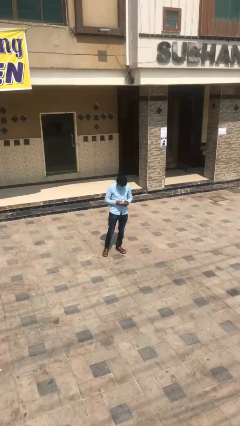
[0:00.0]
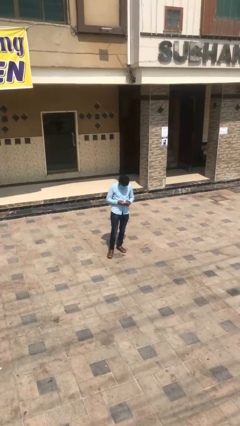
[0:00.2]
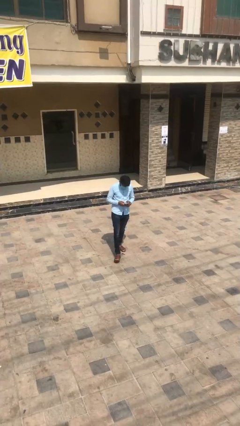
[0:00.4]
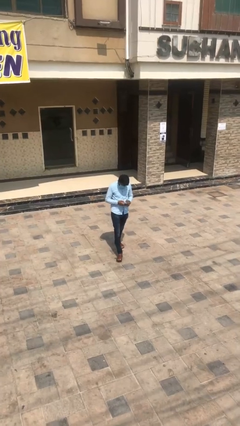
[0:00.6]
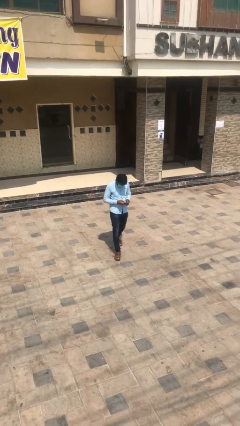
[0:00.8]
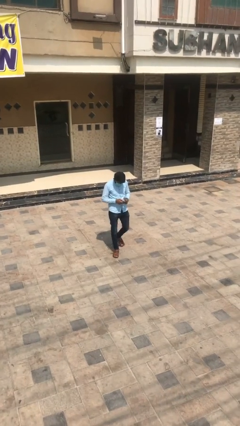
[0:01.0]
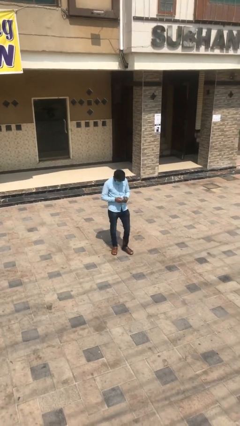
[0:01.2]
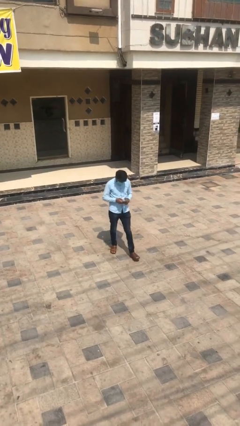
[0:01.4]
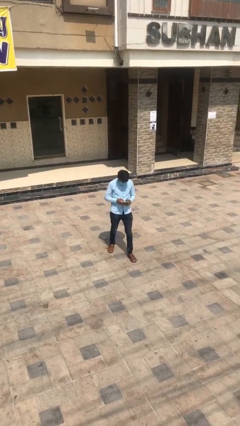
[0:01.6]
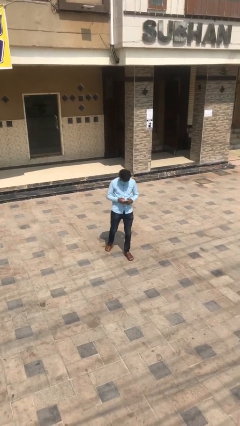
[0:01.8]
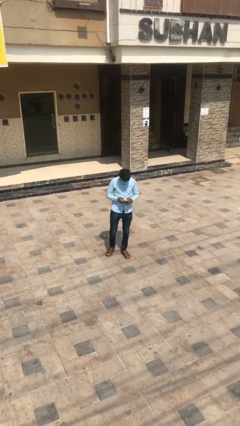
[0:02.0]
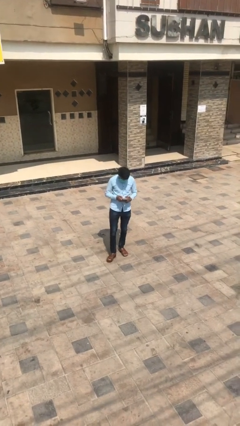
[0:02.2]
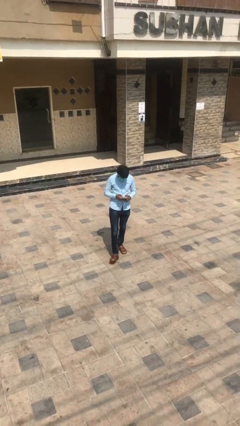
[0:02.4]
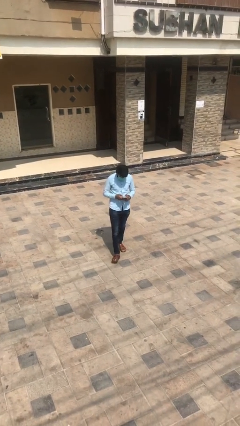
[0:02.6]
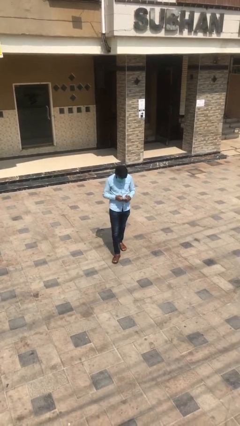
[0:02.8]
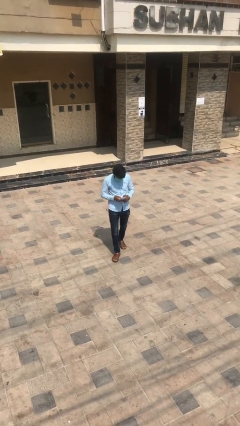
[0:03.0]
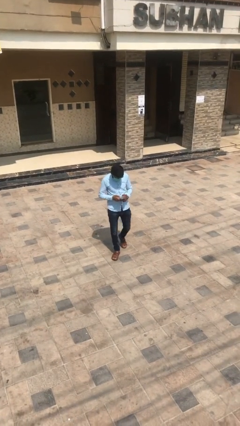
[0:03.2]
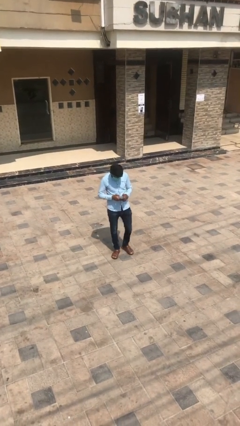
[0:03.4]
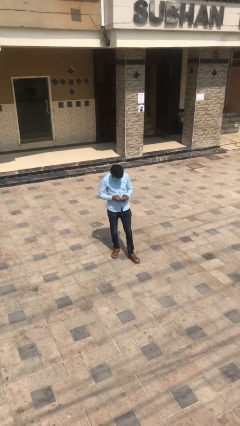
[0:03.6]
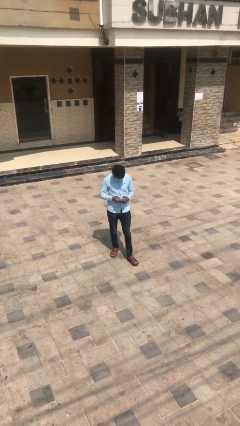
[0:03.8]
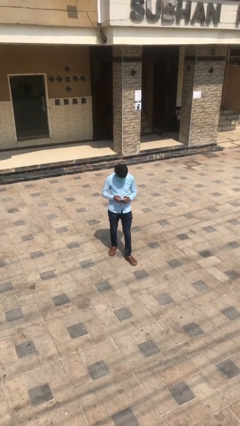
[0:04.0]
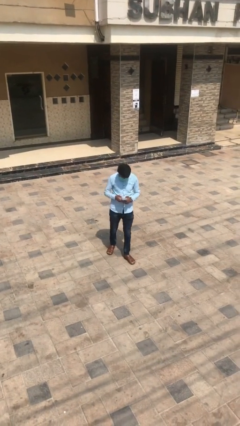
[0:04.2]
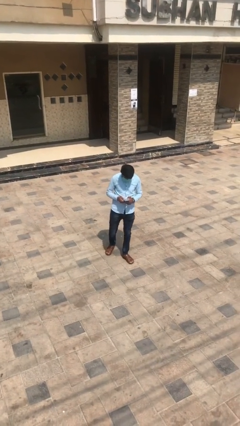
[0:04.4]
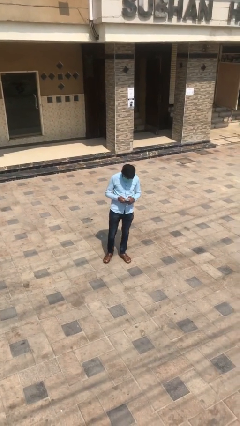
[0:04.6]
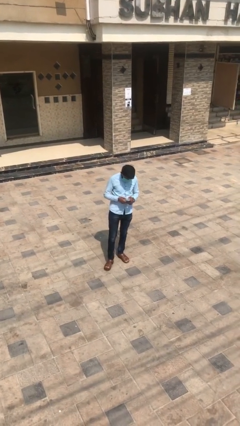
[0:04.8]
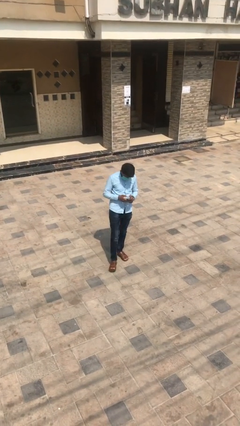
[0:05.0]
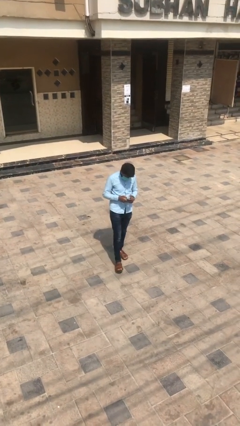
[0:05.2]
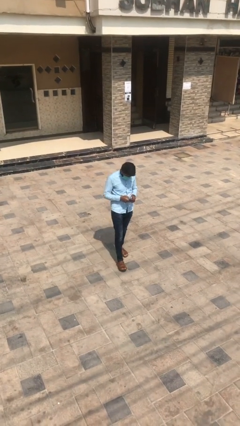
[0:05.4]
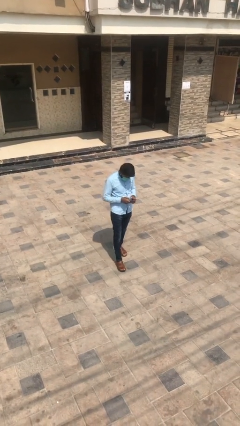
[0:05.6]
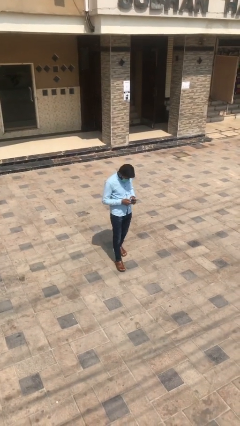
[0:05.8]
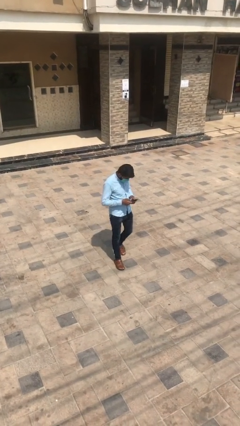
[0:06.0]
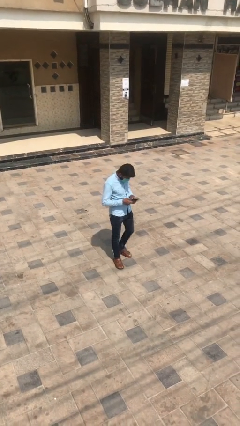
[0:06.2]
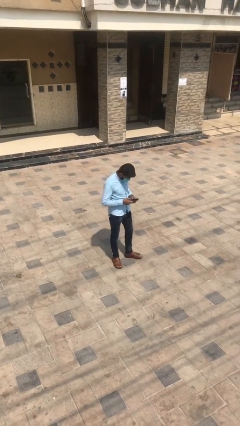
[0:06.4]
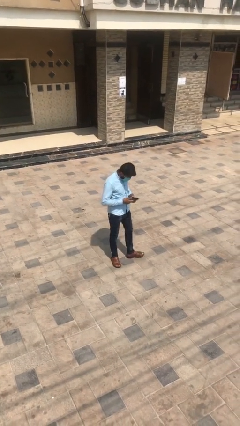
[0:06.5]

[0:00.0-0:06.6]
person texts on phone

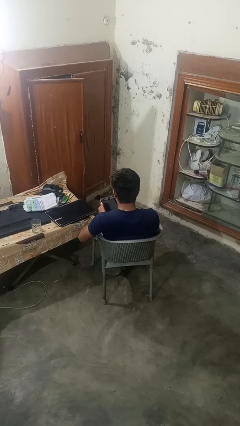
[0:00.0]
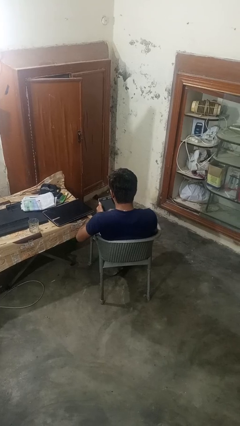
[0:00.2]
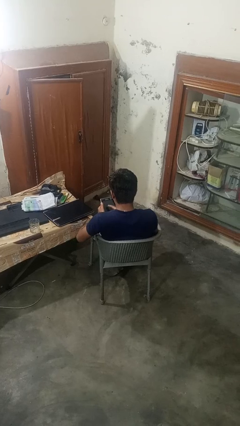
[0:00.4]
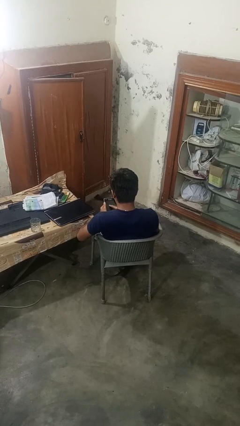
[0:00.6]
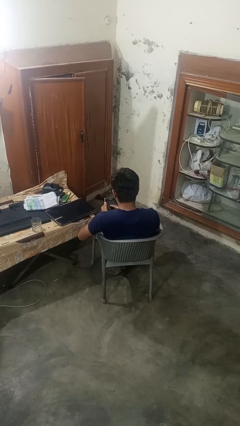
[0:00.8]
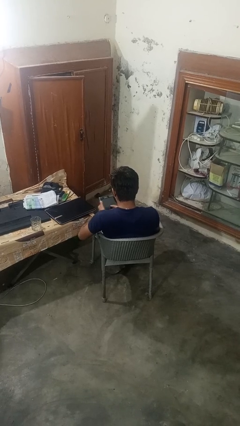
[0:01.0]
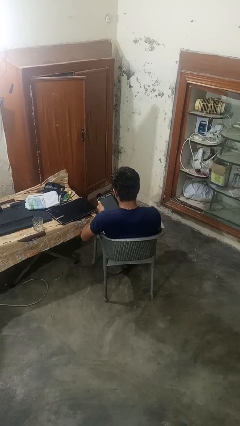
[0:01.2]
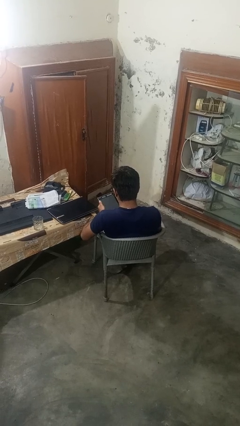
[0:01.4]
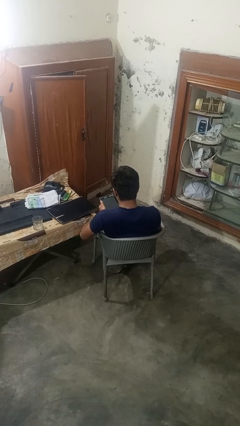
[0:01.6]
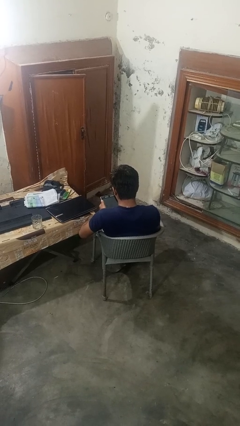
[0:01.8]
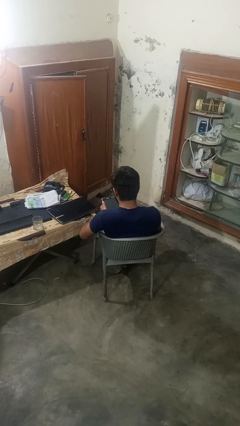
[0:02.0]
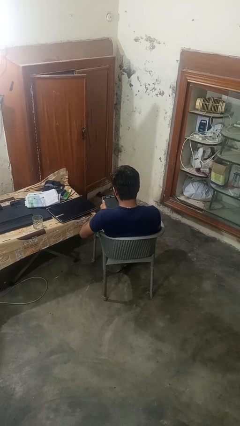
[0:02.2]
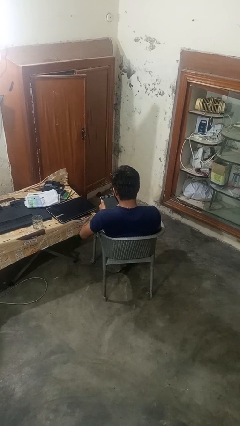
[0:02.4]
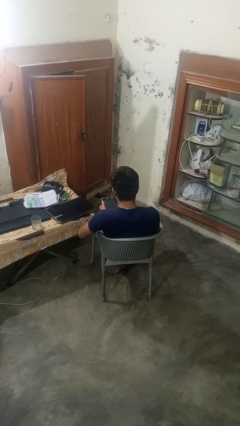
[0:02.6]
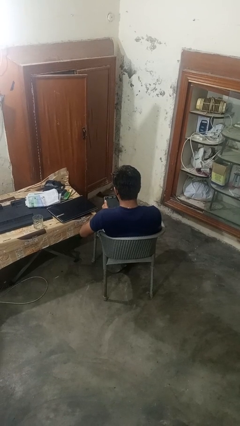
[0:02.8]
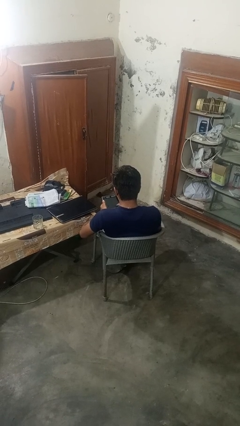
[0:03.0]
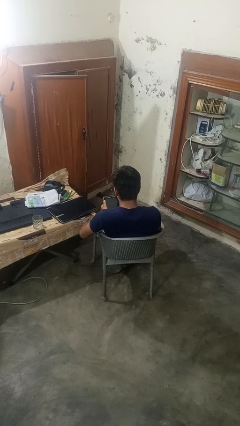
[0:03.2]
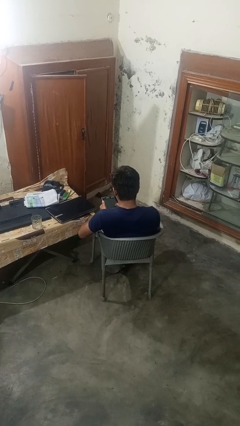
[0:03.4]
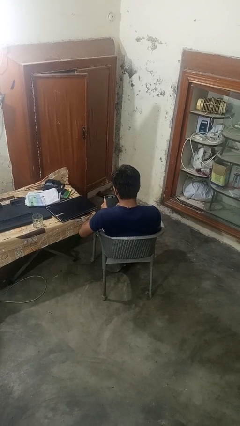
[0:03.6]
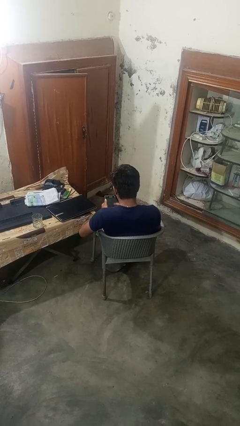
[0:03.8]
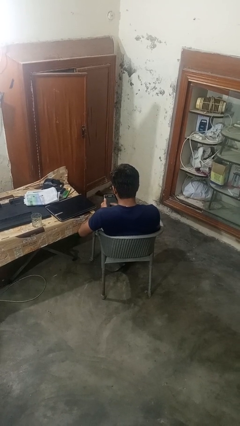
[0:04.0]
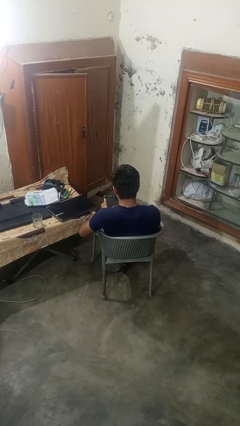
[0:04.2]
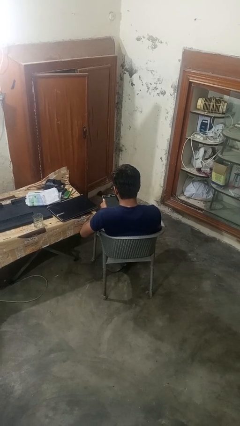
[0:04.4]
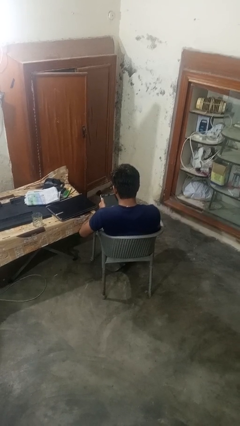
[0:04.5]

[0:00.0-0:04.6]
person interacts with tablet

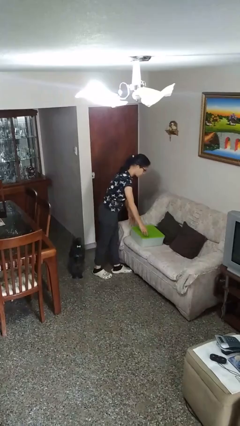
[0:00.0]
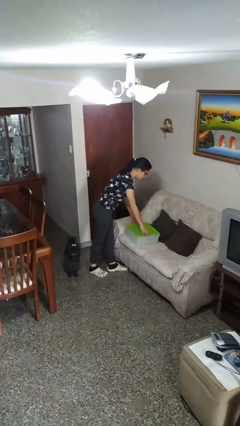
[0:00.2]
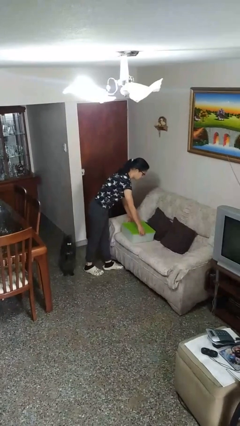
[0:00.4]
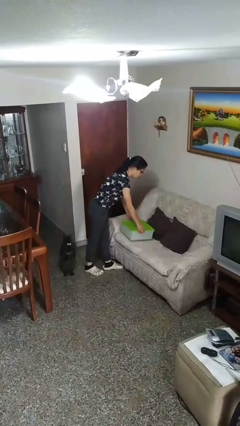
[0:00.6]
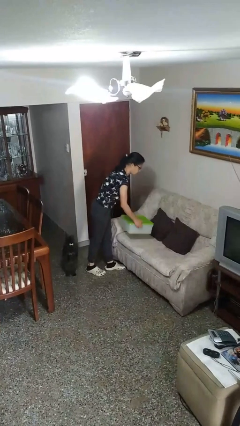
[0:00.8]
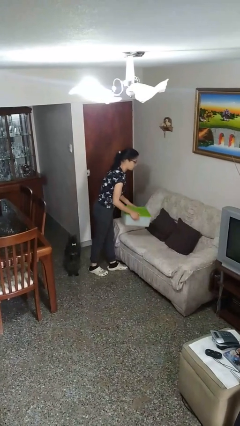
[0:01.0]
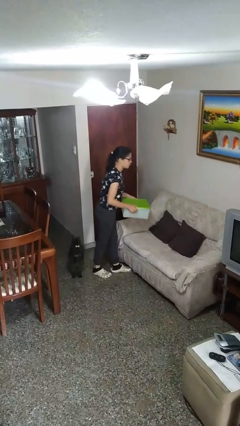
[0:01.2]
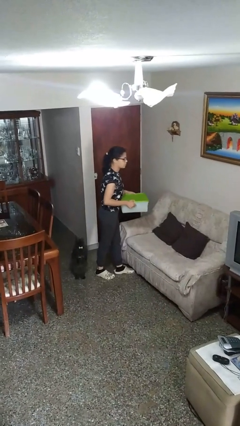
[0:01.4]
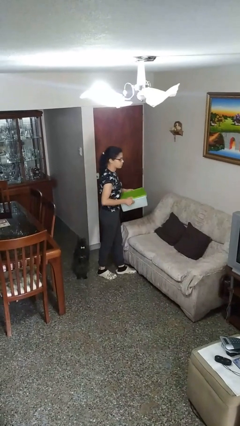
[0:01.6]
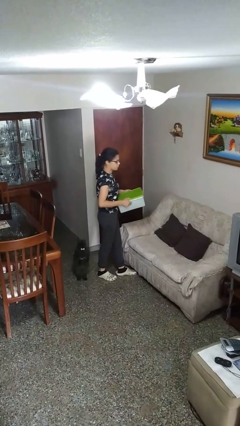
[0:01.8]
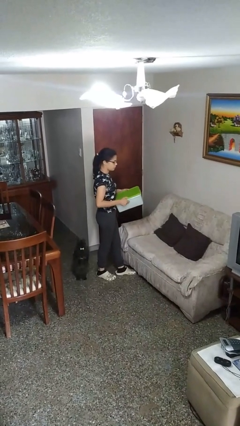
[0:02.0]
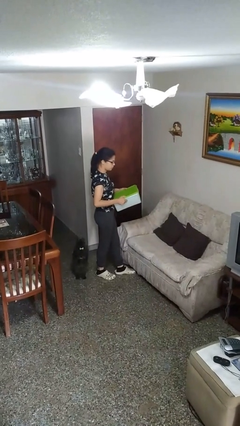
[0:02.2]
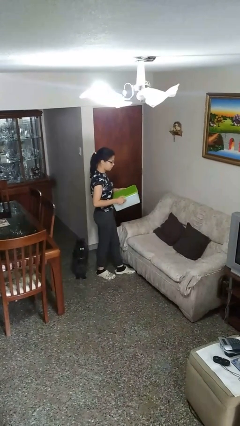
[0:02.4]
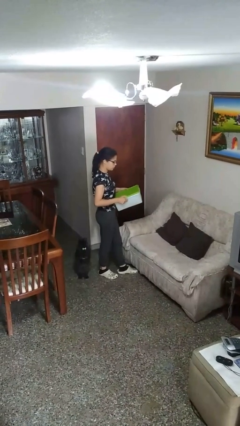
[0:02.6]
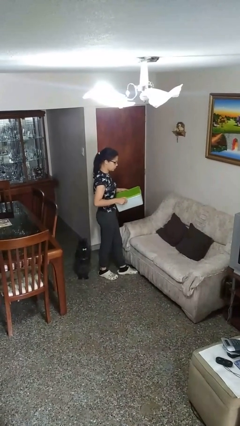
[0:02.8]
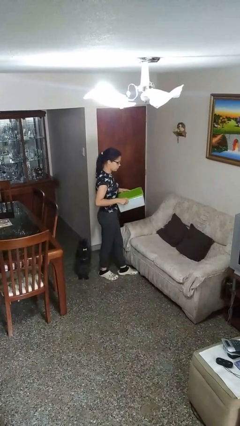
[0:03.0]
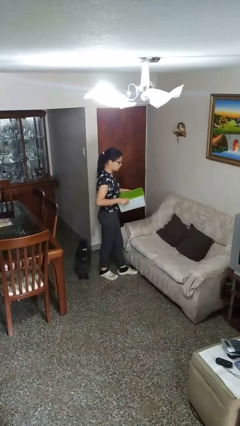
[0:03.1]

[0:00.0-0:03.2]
person picks up object from couch

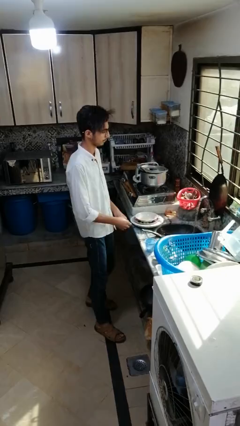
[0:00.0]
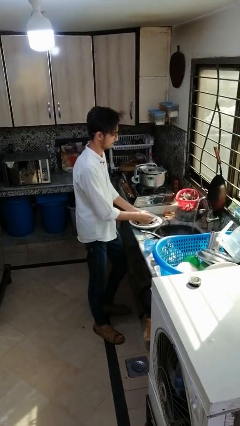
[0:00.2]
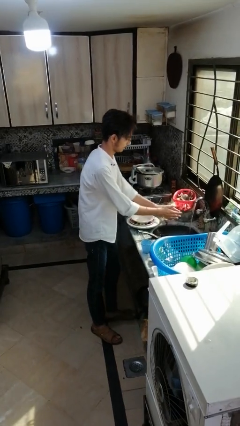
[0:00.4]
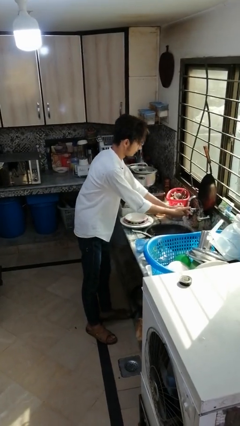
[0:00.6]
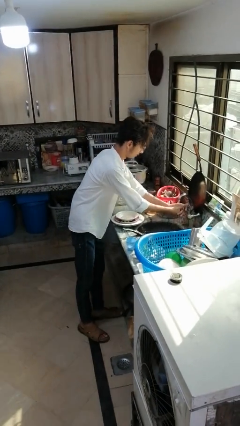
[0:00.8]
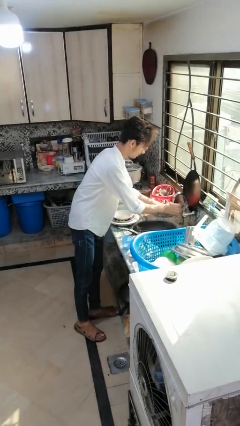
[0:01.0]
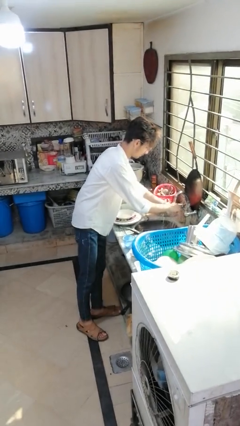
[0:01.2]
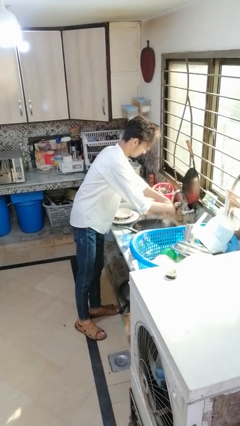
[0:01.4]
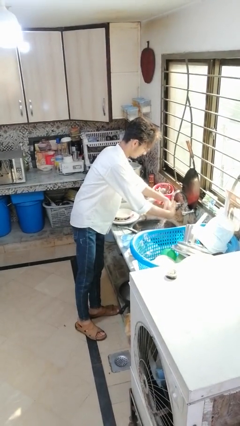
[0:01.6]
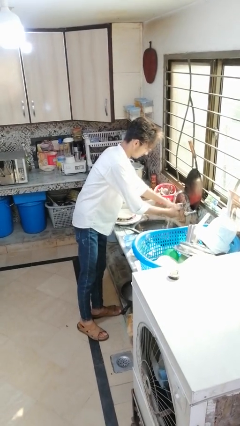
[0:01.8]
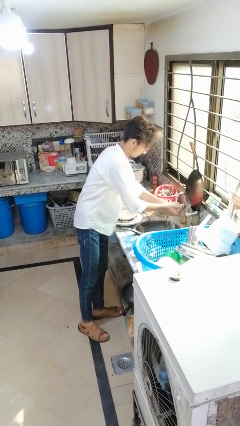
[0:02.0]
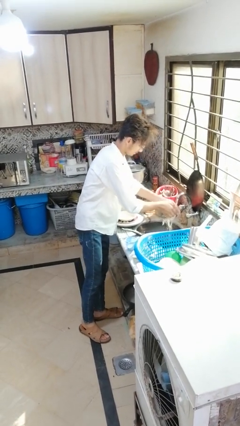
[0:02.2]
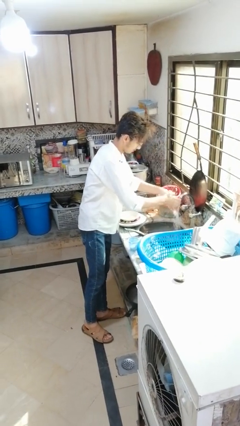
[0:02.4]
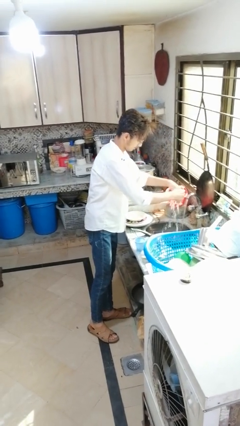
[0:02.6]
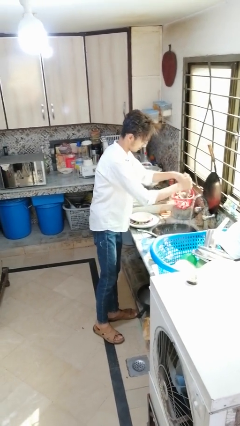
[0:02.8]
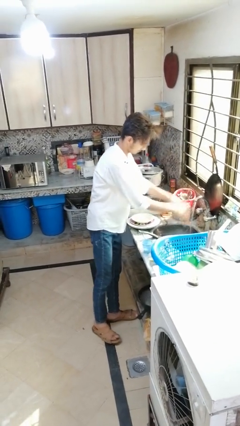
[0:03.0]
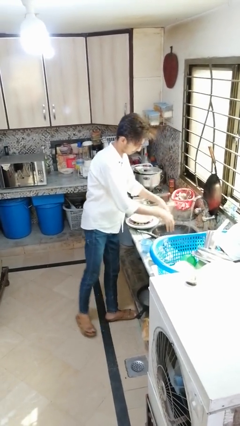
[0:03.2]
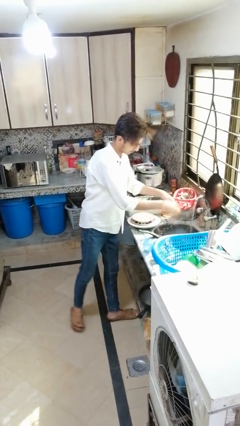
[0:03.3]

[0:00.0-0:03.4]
person washes hands
